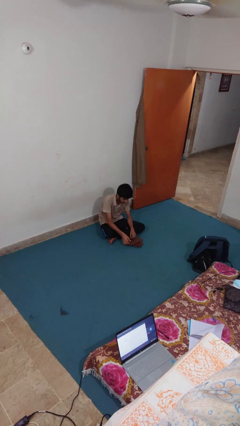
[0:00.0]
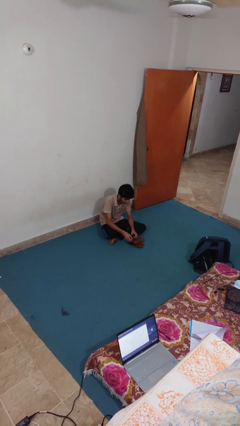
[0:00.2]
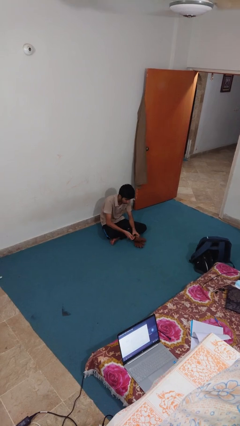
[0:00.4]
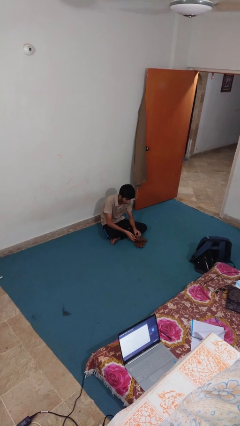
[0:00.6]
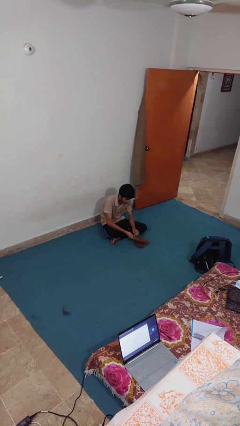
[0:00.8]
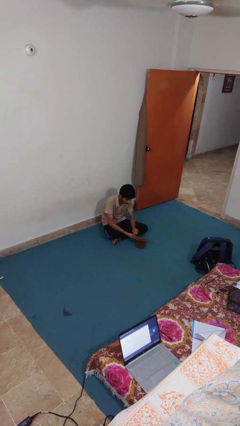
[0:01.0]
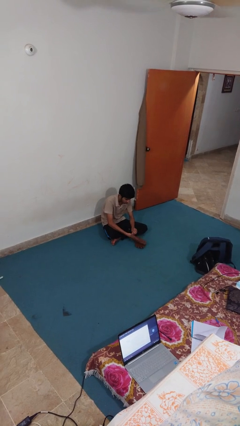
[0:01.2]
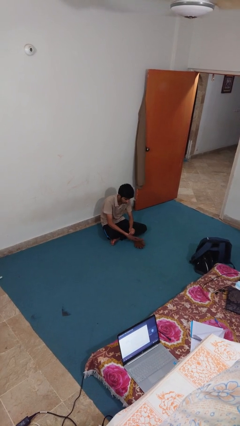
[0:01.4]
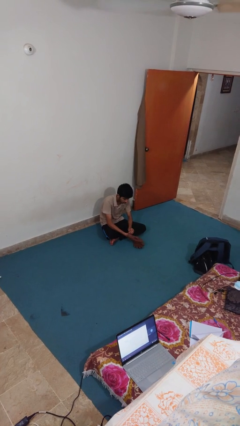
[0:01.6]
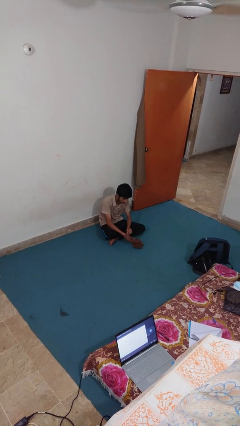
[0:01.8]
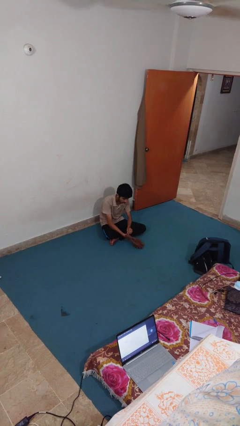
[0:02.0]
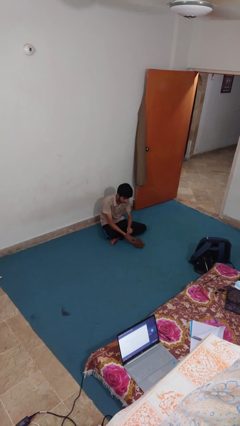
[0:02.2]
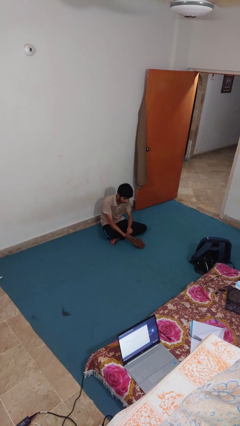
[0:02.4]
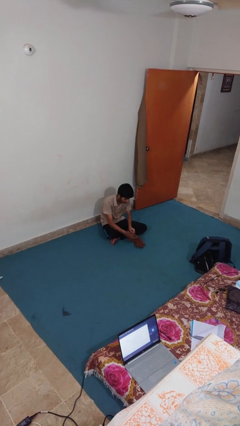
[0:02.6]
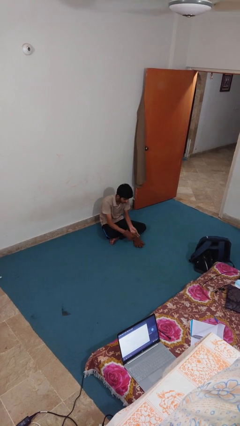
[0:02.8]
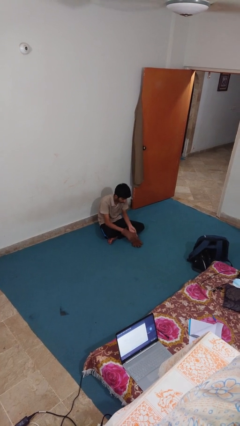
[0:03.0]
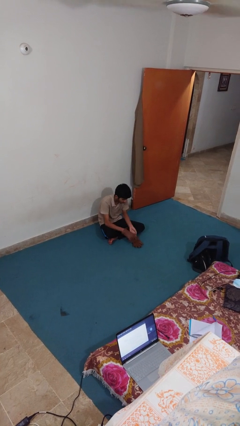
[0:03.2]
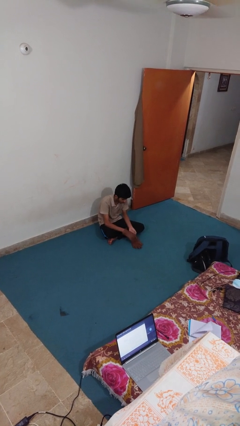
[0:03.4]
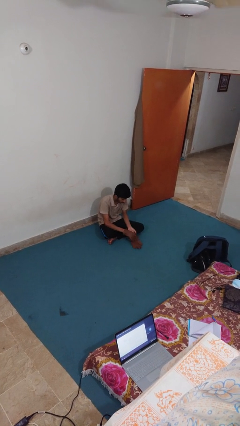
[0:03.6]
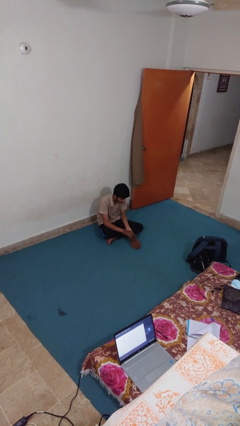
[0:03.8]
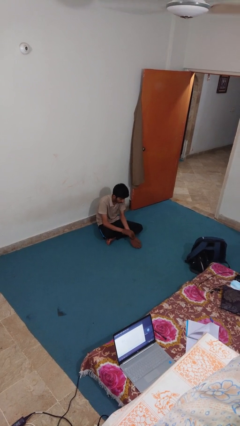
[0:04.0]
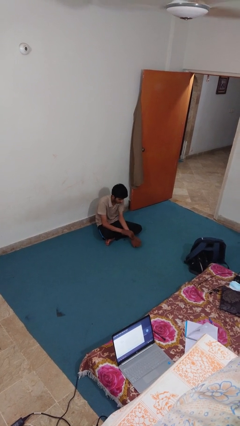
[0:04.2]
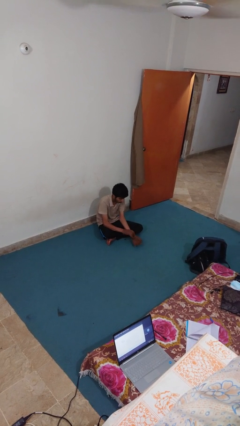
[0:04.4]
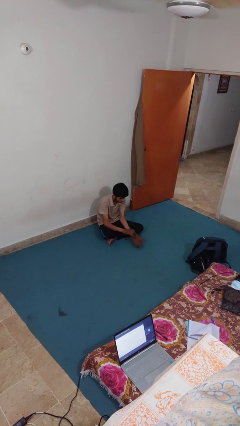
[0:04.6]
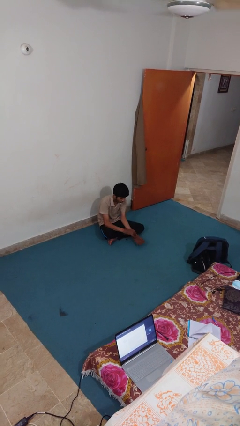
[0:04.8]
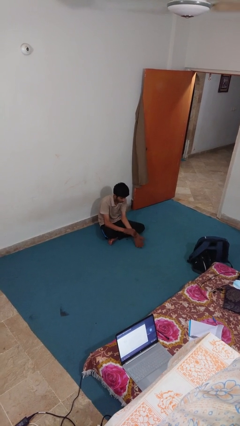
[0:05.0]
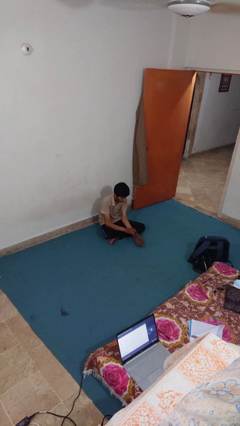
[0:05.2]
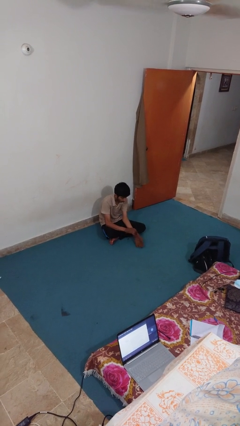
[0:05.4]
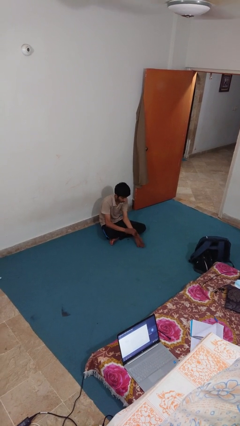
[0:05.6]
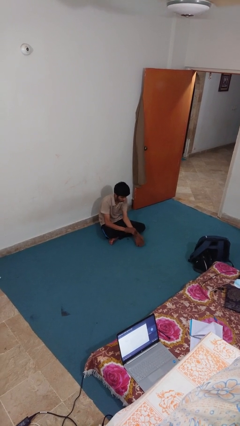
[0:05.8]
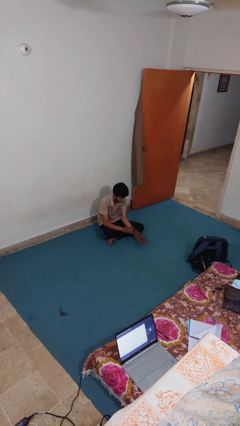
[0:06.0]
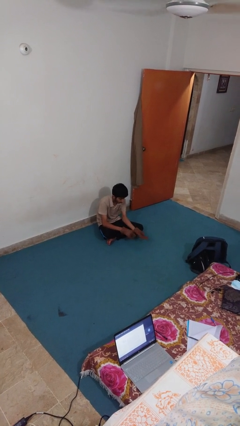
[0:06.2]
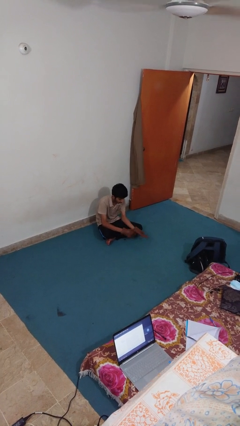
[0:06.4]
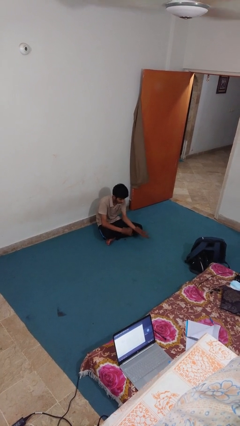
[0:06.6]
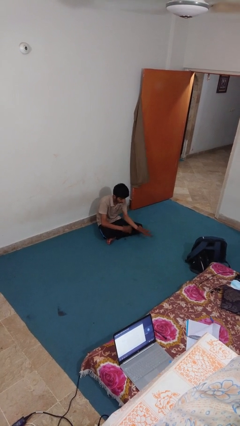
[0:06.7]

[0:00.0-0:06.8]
person puts on gloves

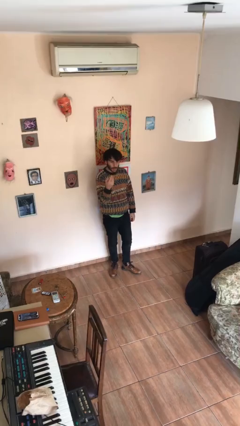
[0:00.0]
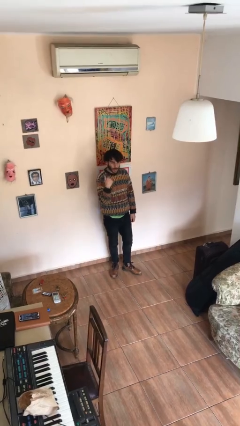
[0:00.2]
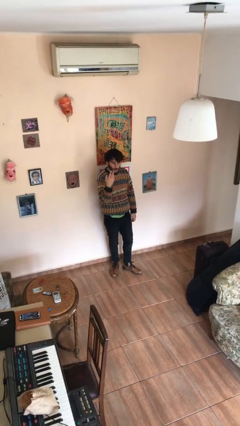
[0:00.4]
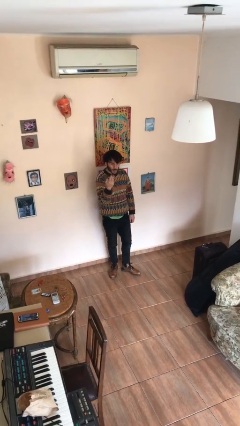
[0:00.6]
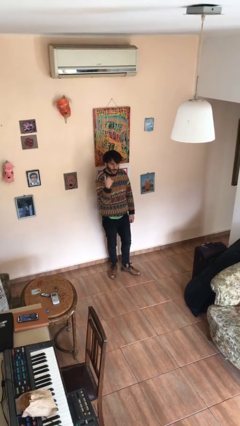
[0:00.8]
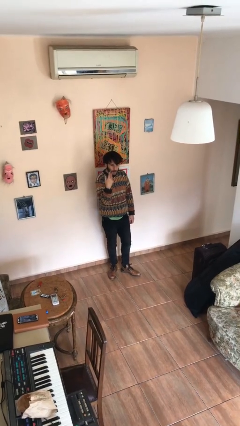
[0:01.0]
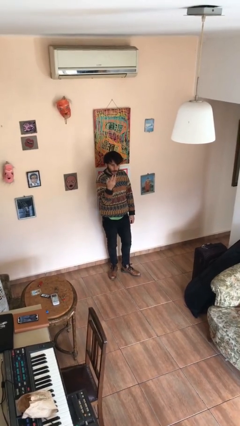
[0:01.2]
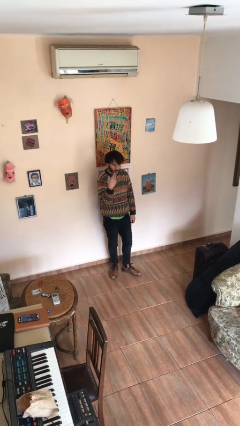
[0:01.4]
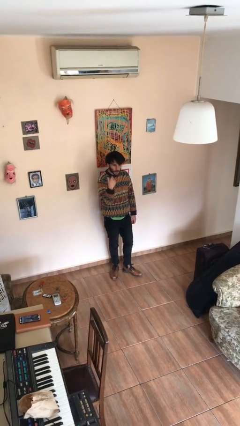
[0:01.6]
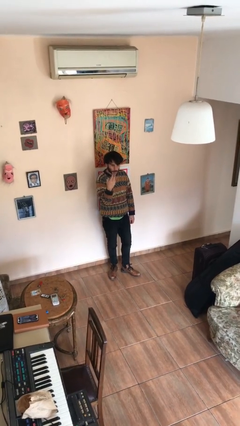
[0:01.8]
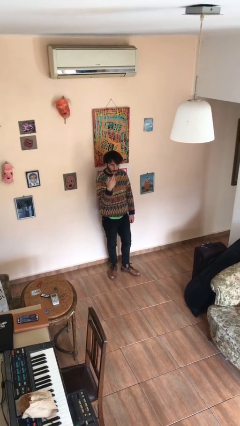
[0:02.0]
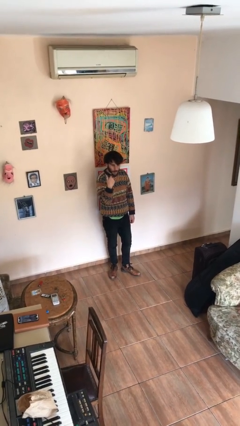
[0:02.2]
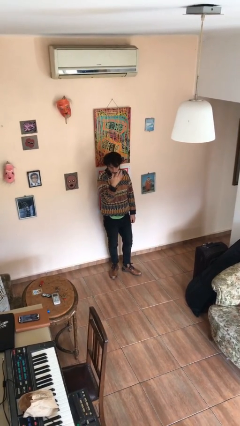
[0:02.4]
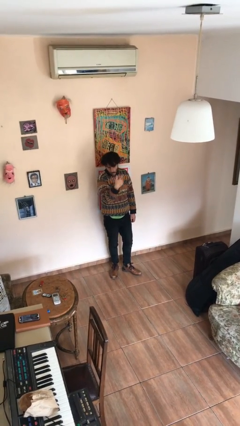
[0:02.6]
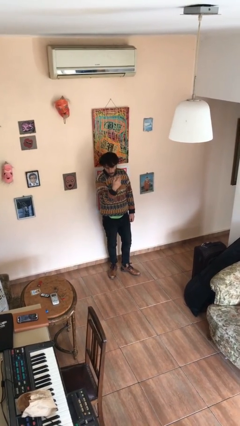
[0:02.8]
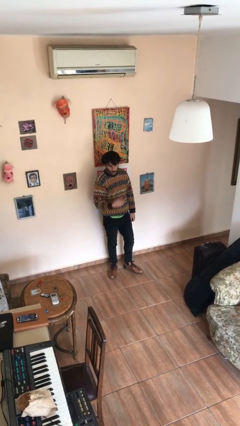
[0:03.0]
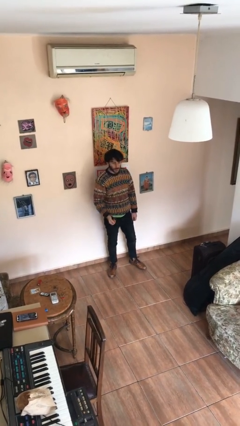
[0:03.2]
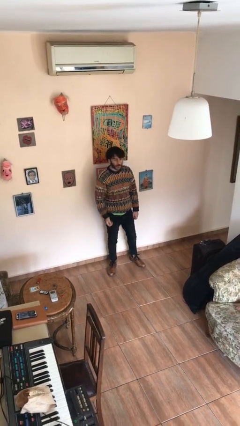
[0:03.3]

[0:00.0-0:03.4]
person gestures come here

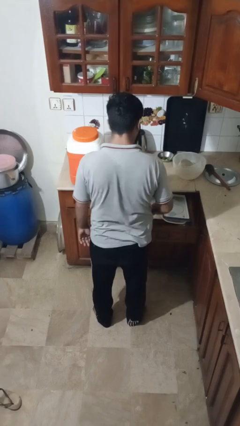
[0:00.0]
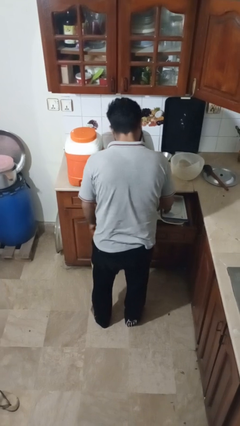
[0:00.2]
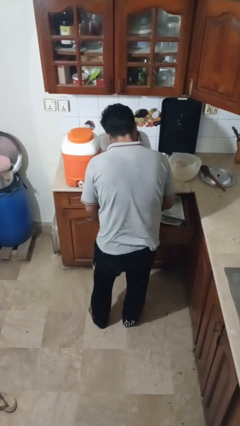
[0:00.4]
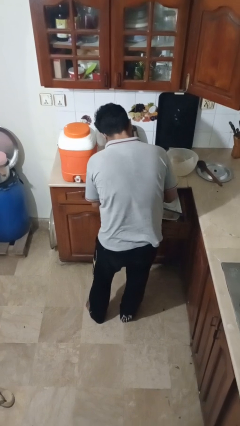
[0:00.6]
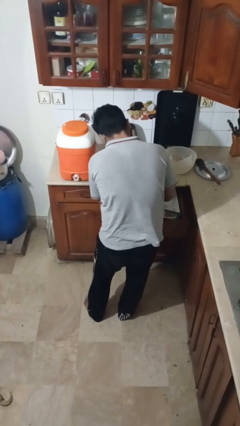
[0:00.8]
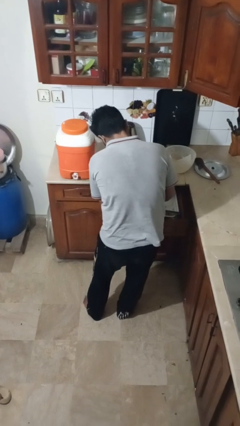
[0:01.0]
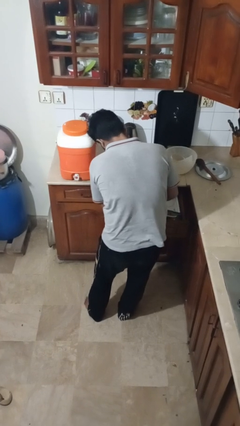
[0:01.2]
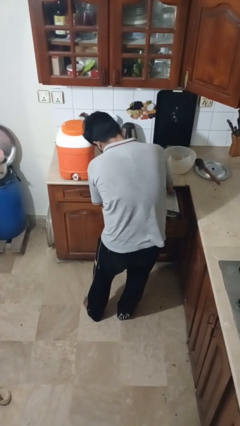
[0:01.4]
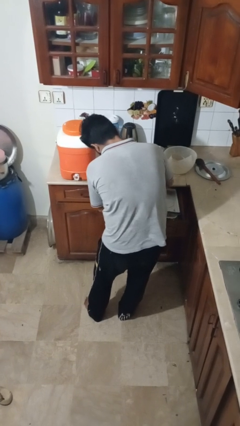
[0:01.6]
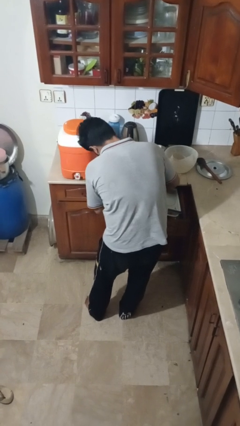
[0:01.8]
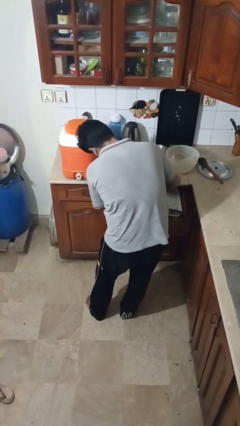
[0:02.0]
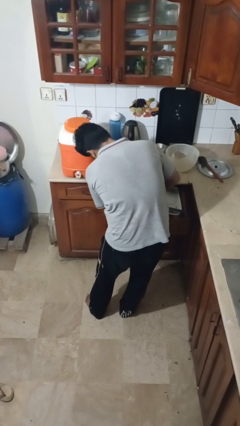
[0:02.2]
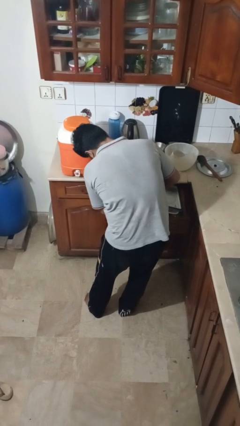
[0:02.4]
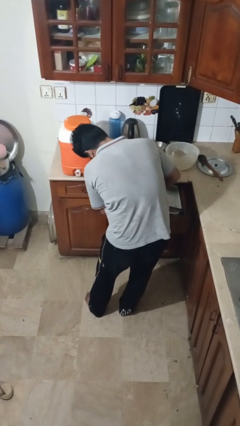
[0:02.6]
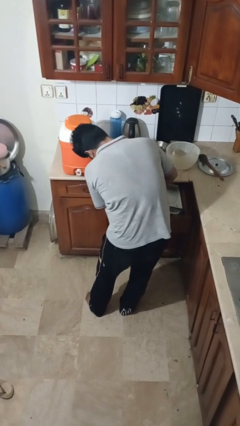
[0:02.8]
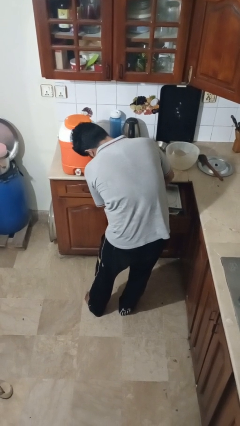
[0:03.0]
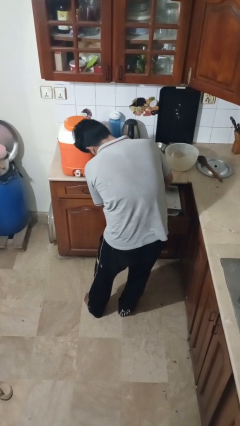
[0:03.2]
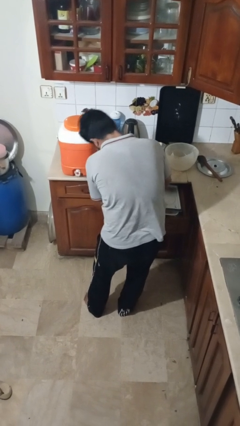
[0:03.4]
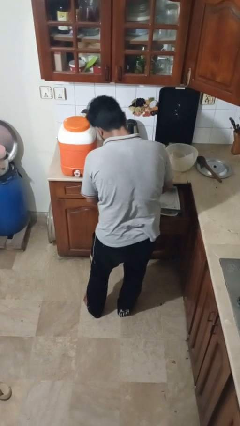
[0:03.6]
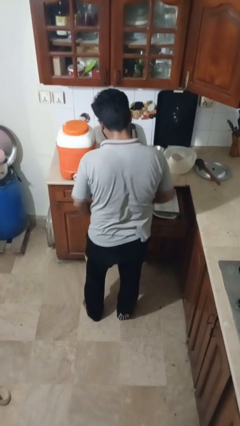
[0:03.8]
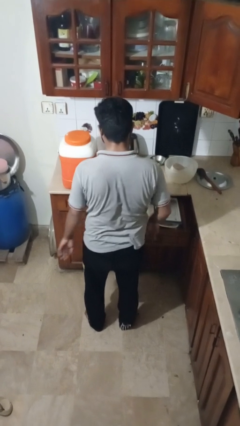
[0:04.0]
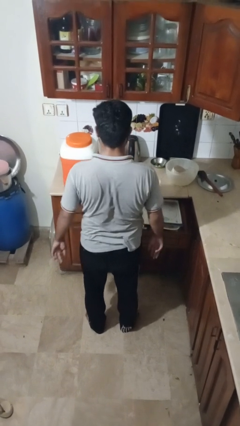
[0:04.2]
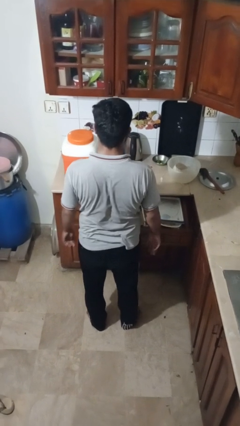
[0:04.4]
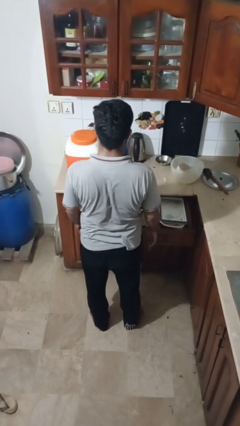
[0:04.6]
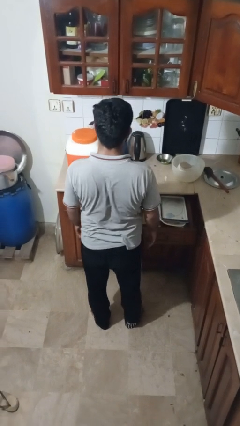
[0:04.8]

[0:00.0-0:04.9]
person searches in kitchen drawer

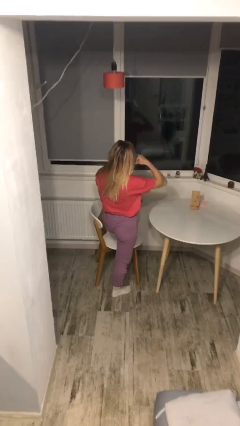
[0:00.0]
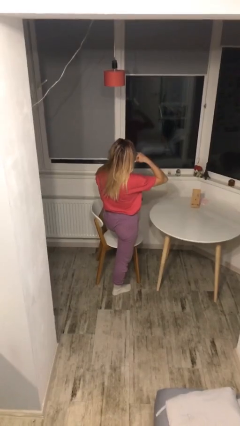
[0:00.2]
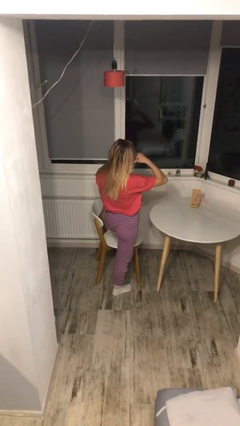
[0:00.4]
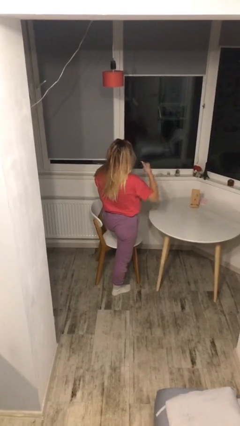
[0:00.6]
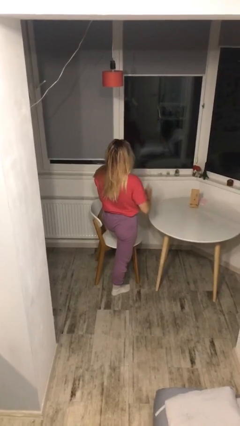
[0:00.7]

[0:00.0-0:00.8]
person gestures number five

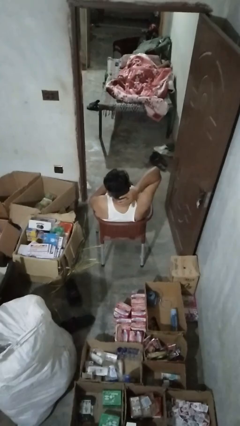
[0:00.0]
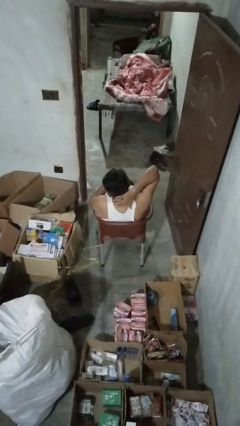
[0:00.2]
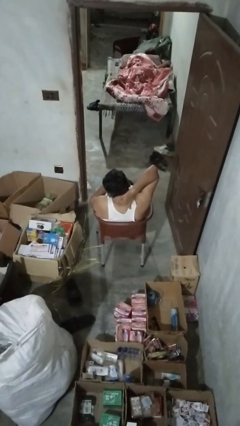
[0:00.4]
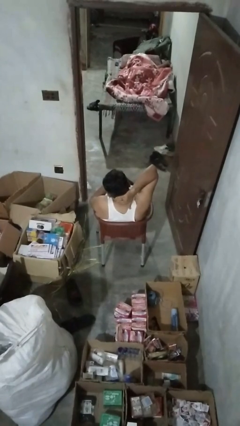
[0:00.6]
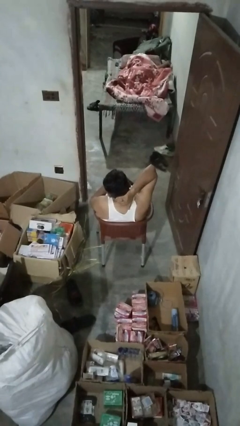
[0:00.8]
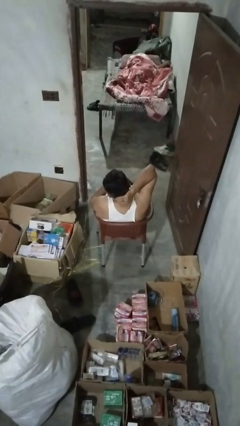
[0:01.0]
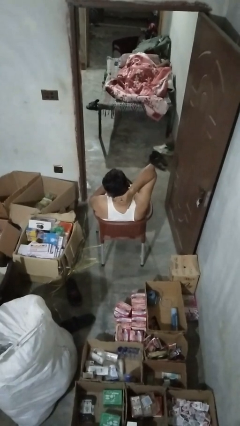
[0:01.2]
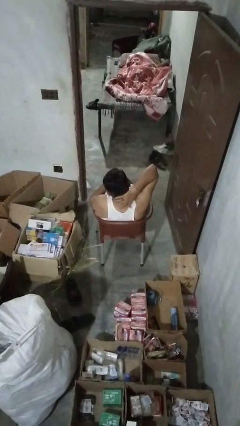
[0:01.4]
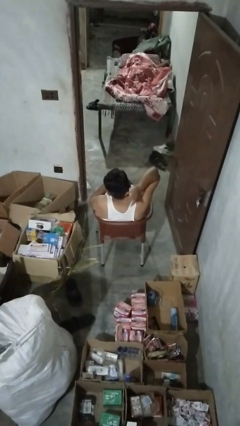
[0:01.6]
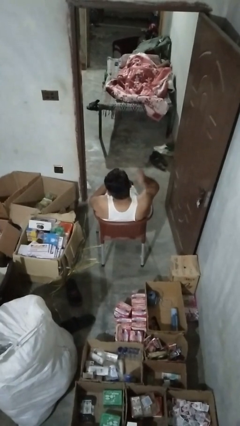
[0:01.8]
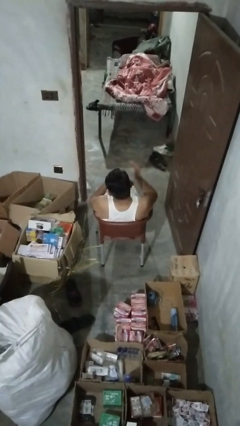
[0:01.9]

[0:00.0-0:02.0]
person rubs neck
